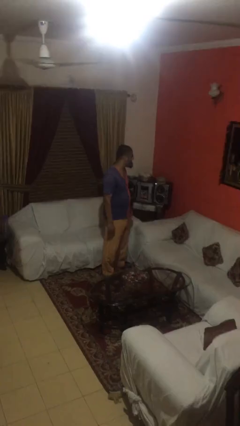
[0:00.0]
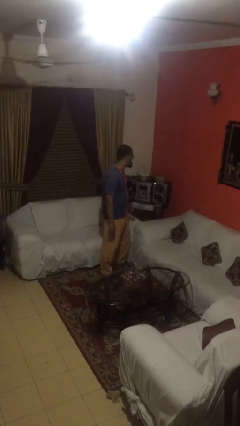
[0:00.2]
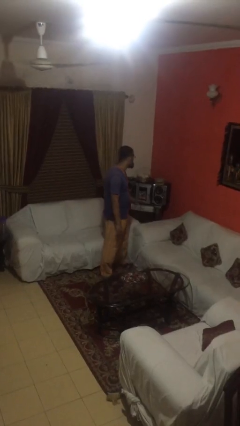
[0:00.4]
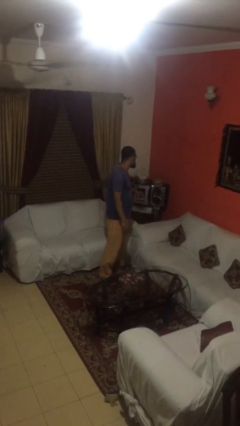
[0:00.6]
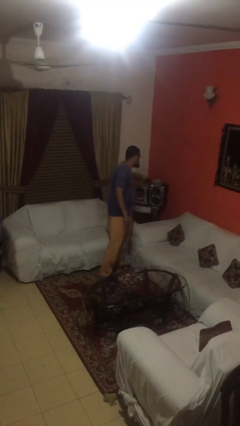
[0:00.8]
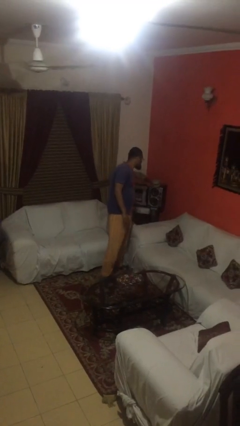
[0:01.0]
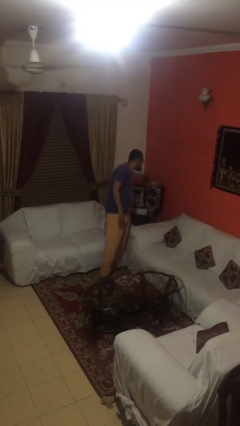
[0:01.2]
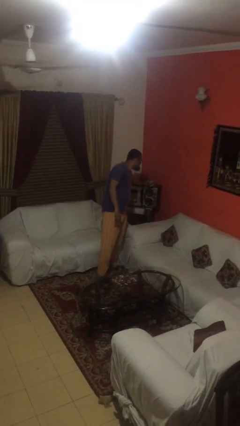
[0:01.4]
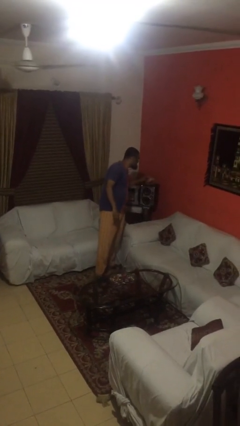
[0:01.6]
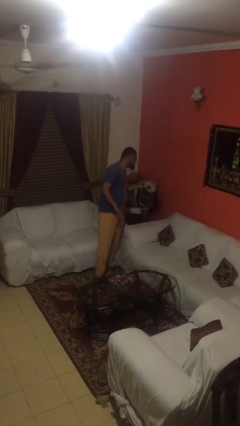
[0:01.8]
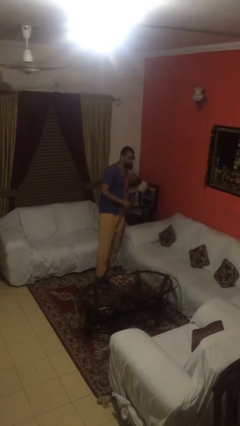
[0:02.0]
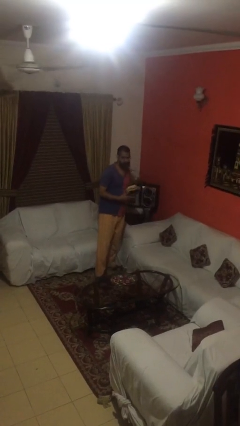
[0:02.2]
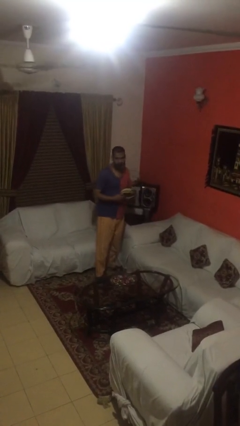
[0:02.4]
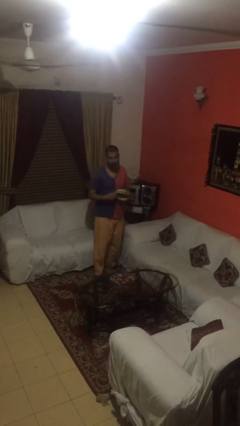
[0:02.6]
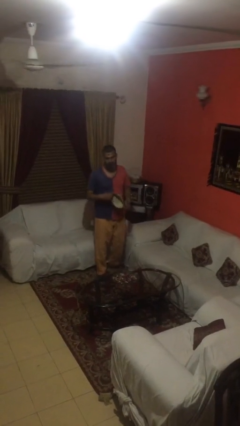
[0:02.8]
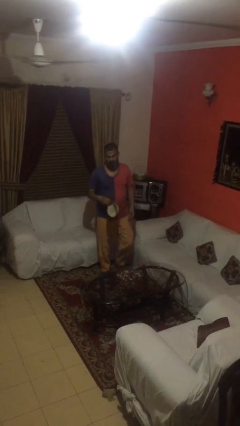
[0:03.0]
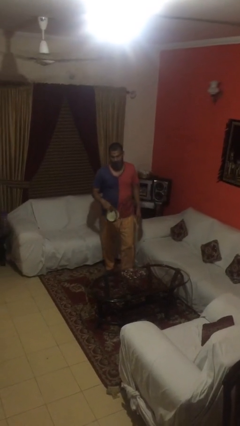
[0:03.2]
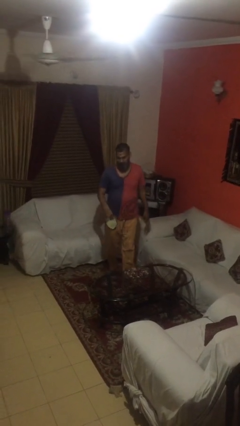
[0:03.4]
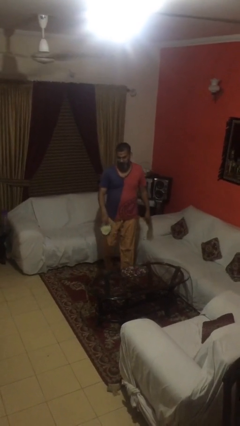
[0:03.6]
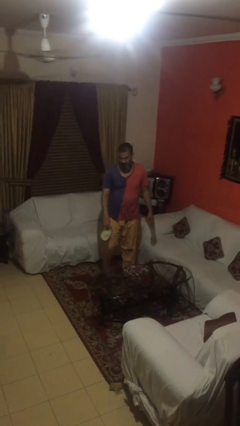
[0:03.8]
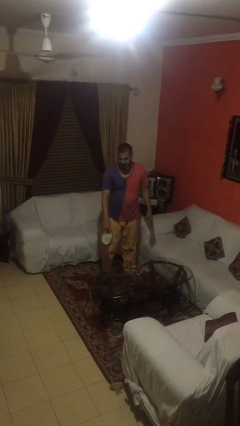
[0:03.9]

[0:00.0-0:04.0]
person picks up object from shelf

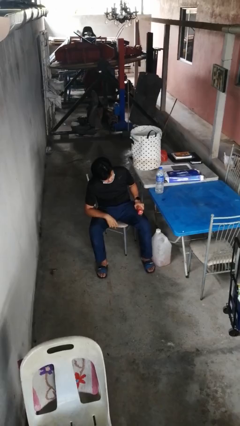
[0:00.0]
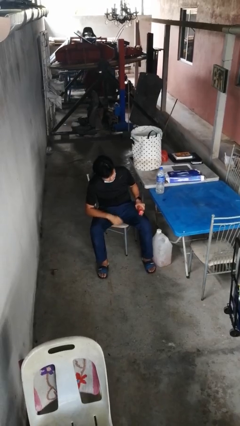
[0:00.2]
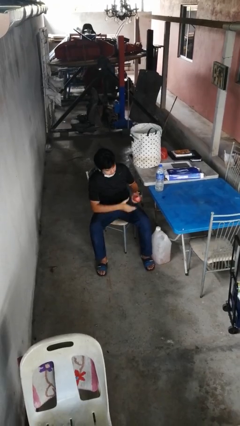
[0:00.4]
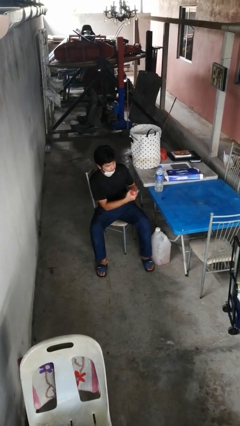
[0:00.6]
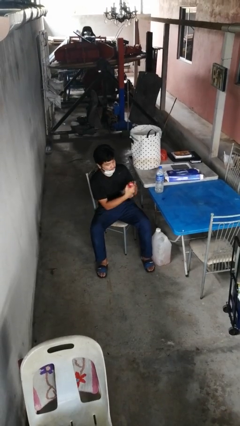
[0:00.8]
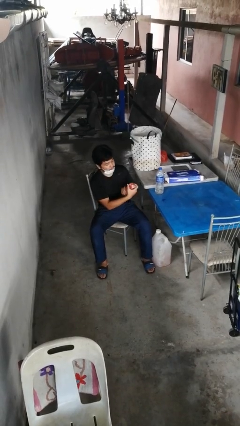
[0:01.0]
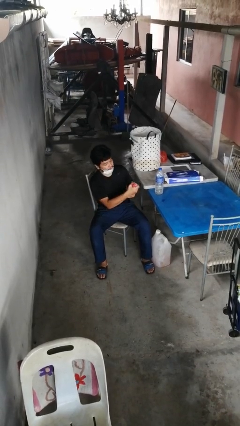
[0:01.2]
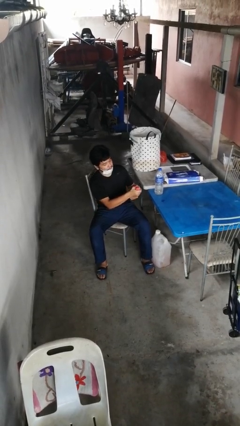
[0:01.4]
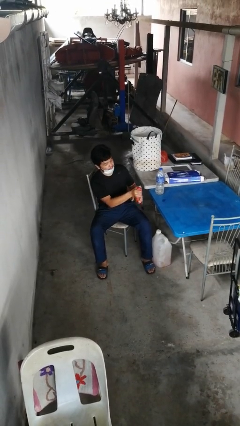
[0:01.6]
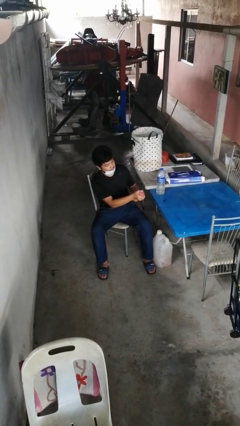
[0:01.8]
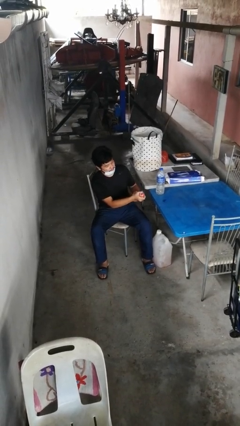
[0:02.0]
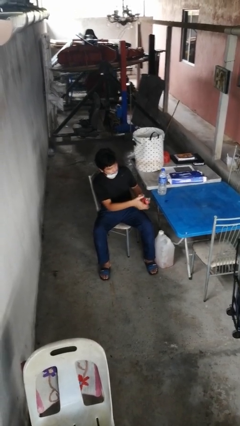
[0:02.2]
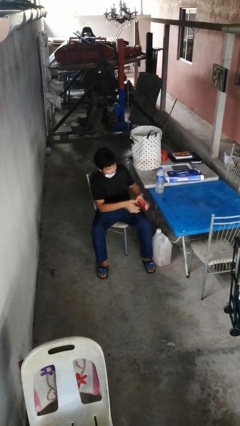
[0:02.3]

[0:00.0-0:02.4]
person squeezes object

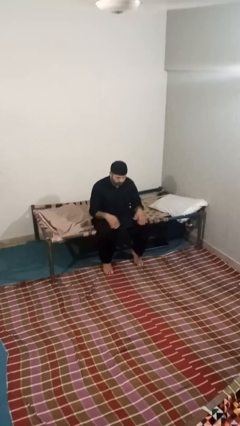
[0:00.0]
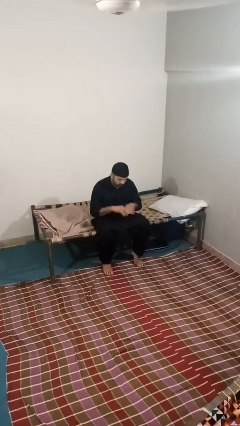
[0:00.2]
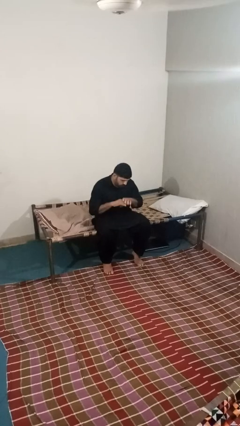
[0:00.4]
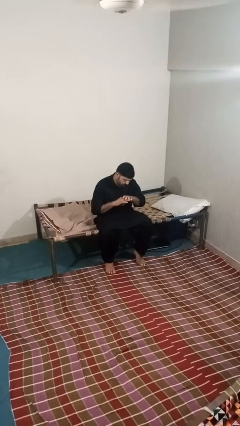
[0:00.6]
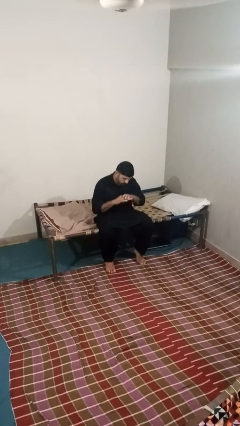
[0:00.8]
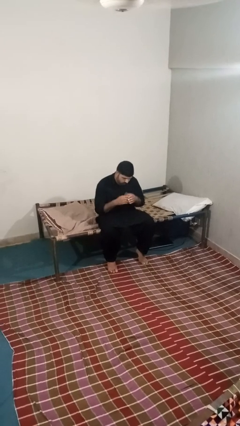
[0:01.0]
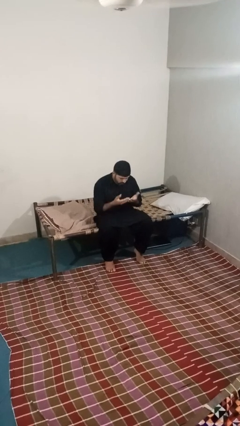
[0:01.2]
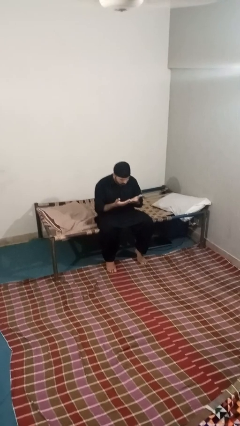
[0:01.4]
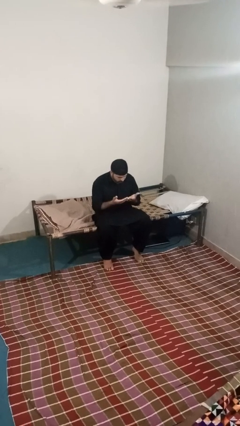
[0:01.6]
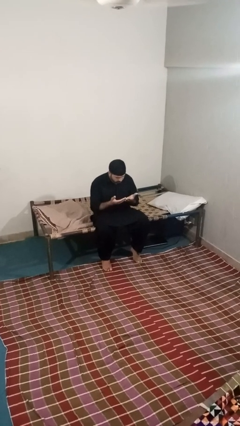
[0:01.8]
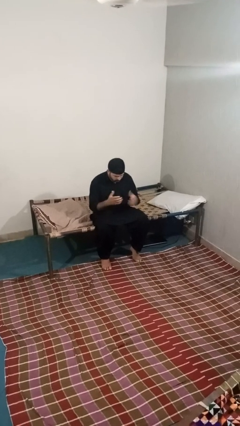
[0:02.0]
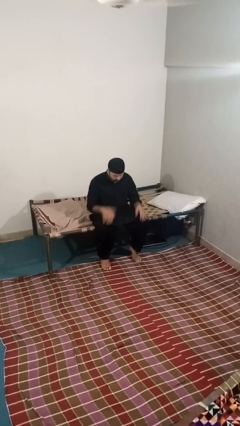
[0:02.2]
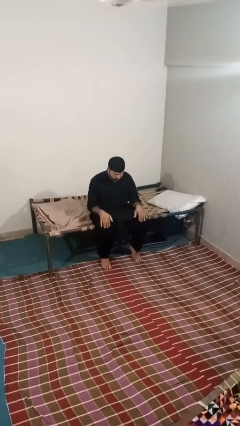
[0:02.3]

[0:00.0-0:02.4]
person looks at hands in lap

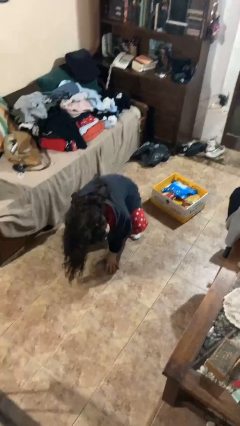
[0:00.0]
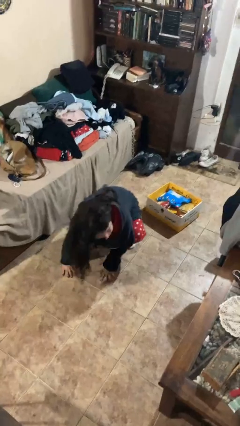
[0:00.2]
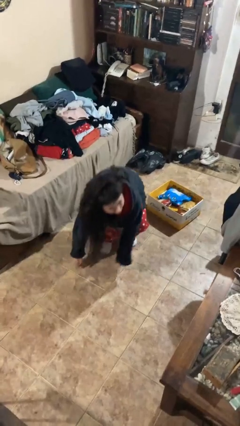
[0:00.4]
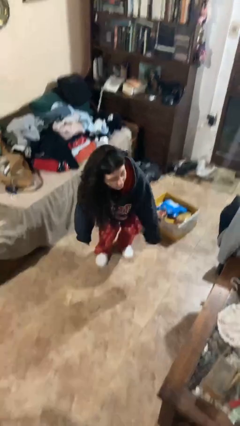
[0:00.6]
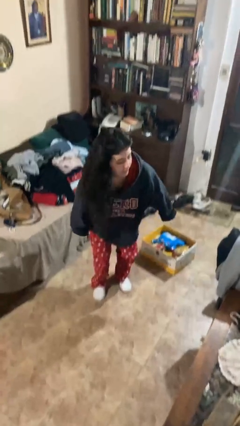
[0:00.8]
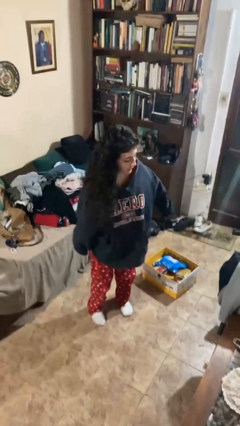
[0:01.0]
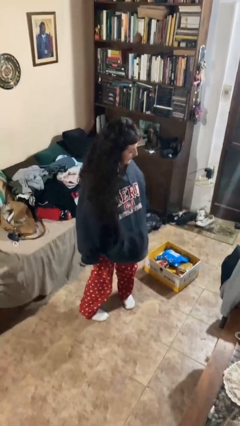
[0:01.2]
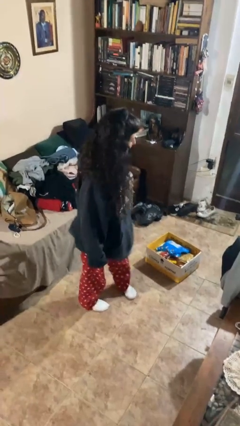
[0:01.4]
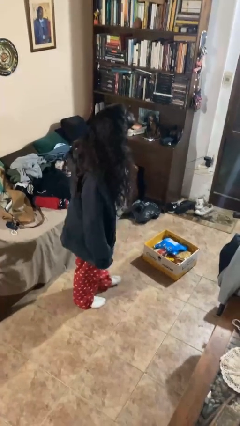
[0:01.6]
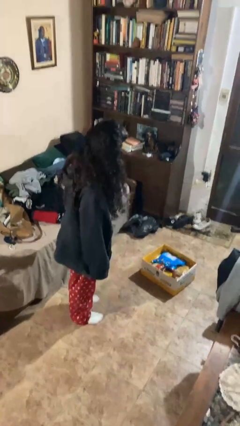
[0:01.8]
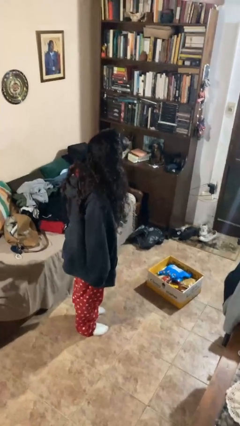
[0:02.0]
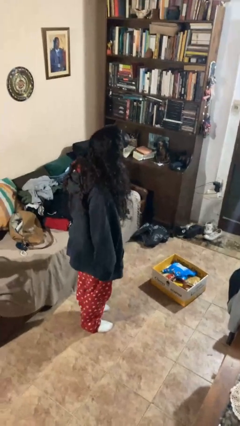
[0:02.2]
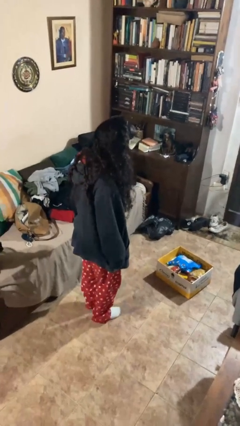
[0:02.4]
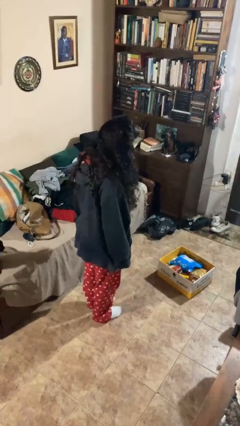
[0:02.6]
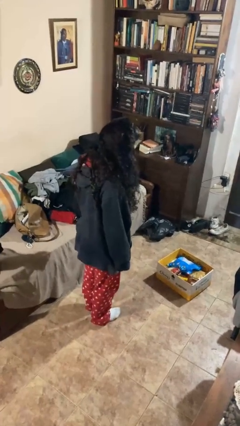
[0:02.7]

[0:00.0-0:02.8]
person stands up from floor

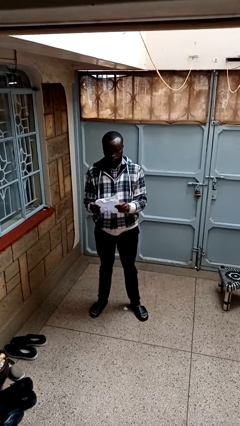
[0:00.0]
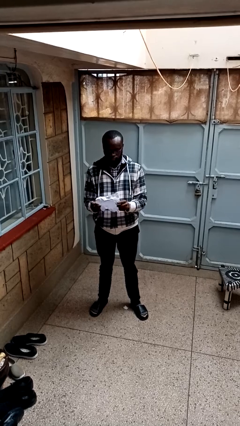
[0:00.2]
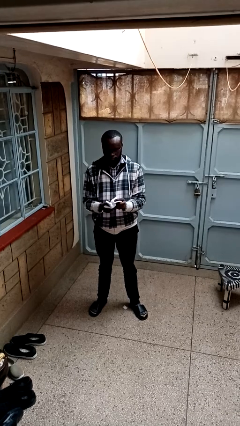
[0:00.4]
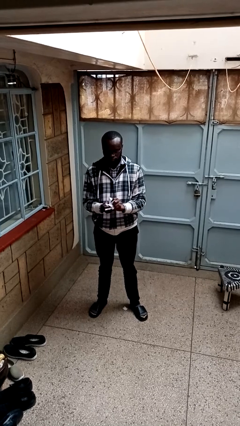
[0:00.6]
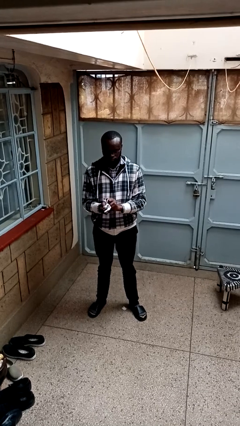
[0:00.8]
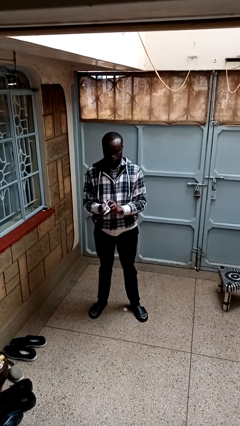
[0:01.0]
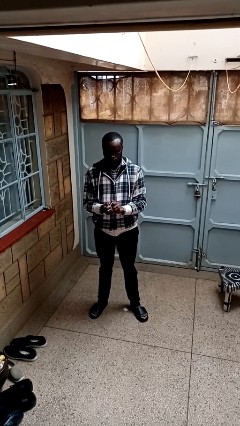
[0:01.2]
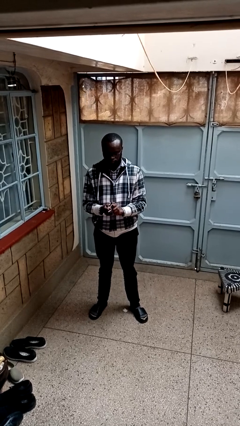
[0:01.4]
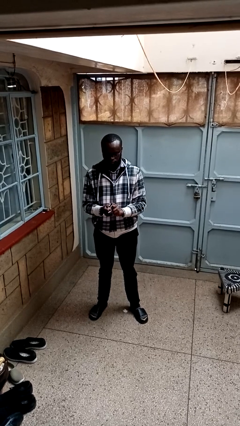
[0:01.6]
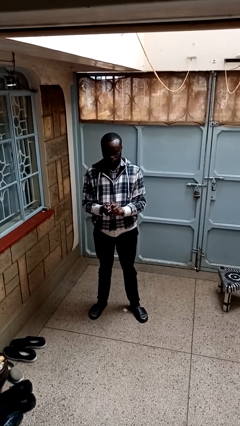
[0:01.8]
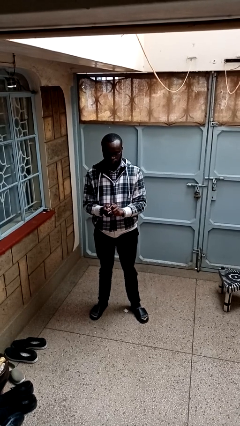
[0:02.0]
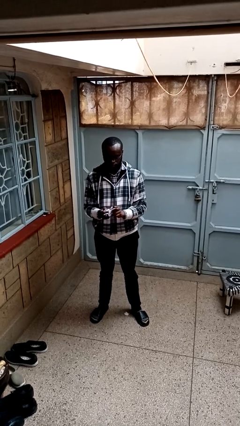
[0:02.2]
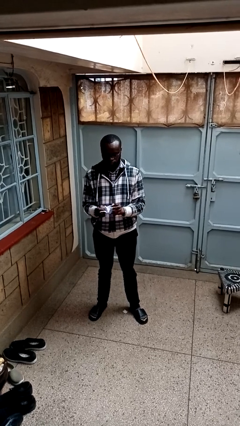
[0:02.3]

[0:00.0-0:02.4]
person crumples paper

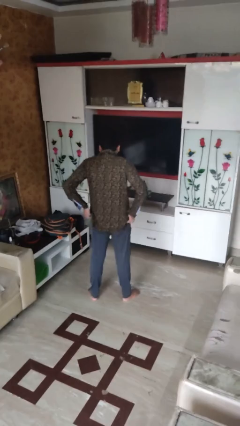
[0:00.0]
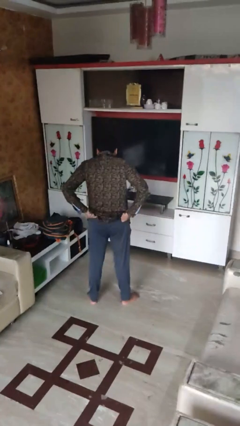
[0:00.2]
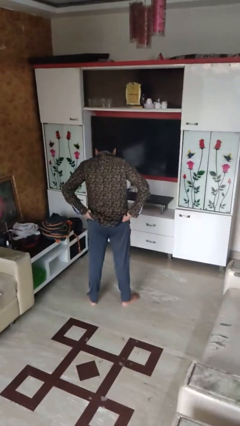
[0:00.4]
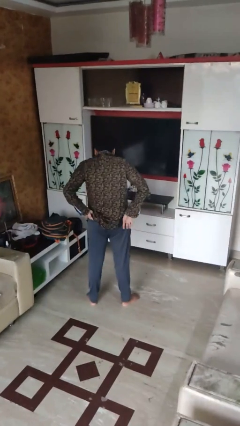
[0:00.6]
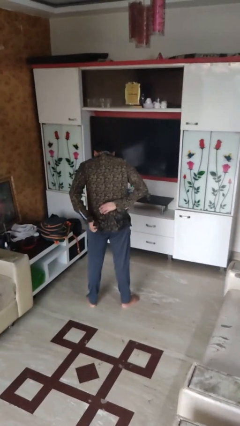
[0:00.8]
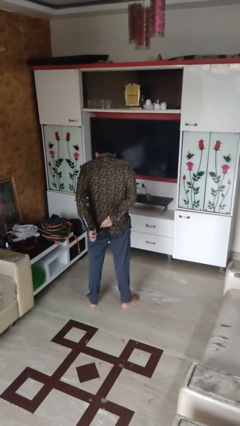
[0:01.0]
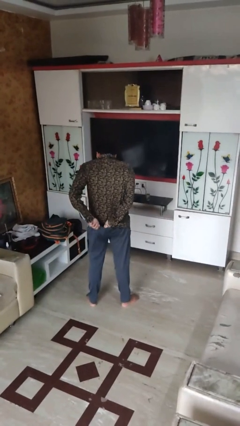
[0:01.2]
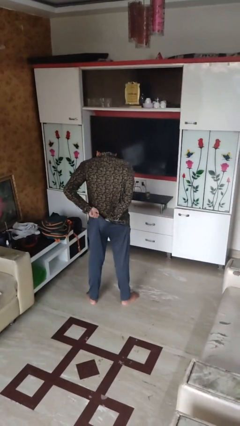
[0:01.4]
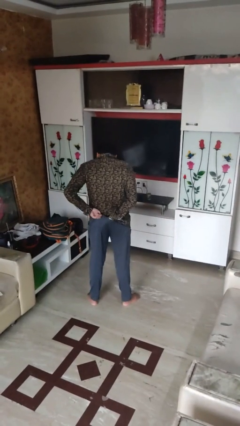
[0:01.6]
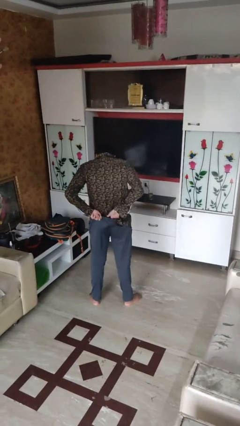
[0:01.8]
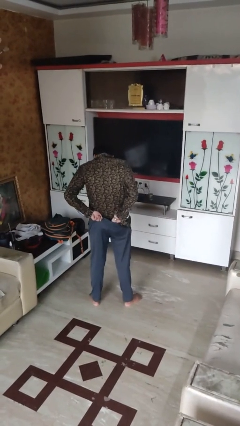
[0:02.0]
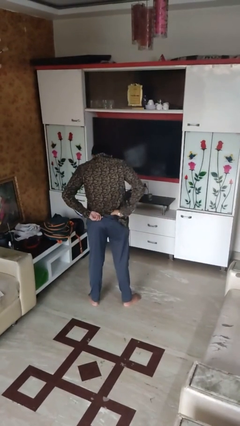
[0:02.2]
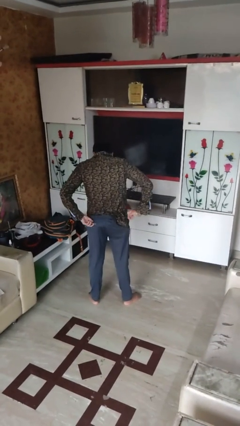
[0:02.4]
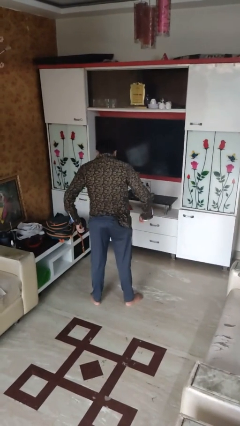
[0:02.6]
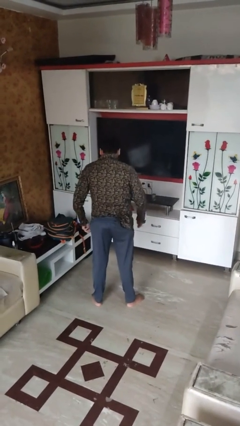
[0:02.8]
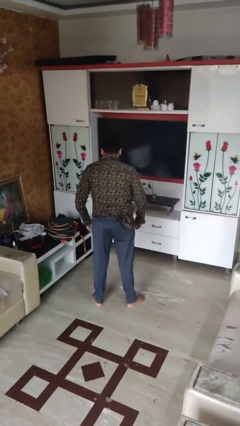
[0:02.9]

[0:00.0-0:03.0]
person tucks in shirt
